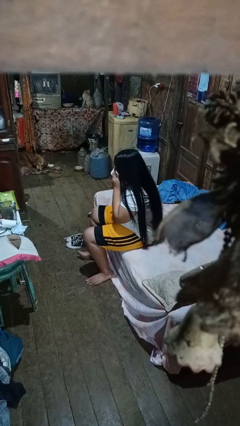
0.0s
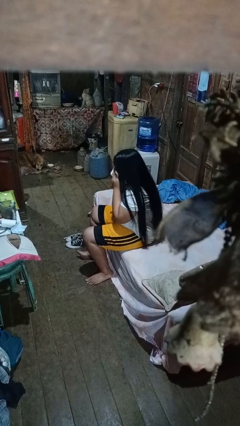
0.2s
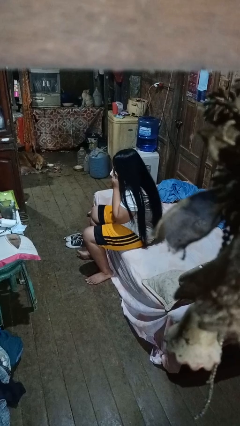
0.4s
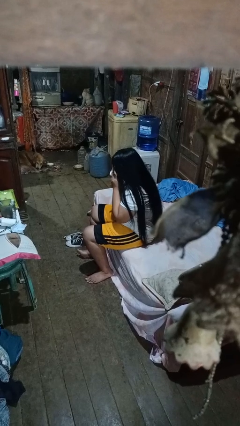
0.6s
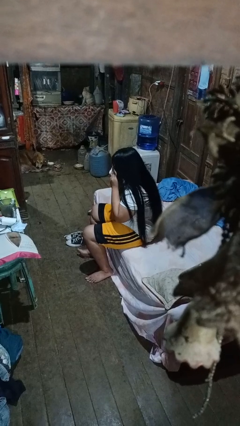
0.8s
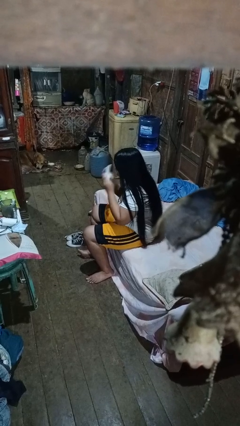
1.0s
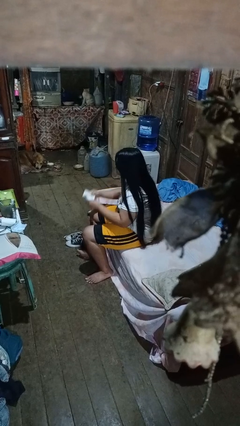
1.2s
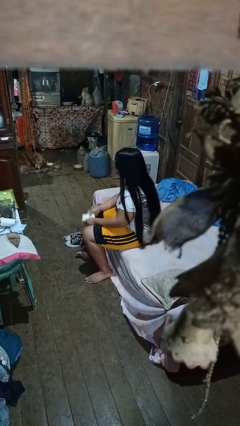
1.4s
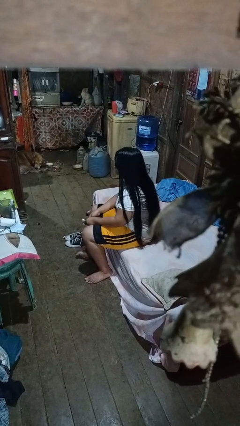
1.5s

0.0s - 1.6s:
person blows nose

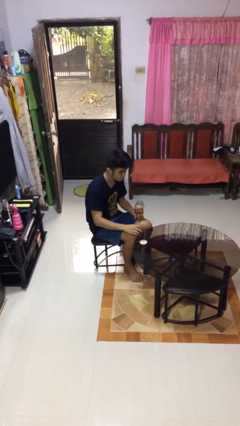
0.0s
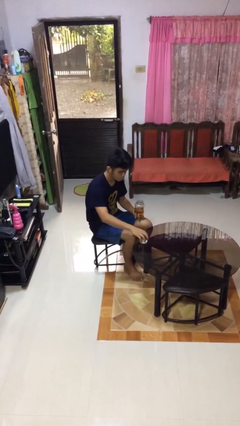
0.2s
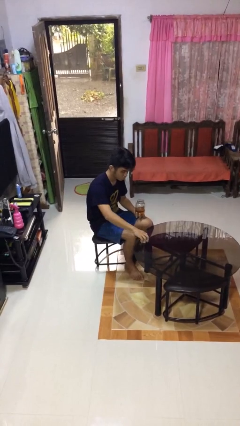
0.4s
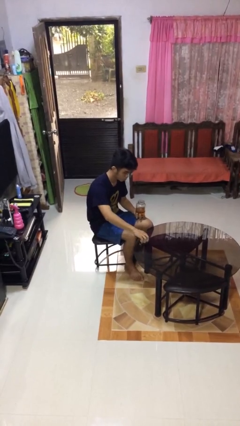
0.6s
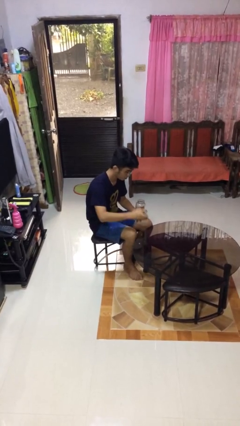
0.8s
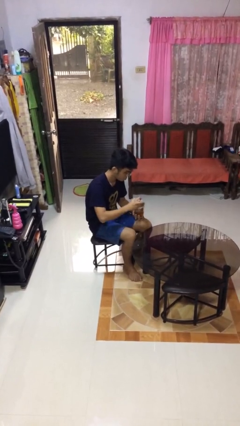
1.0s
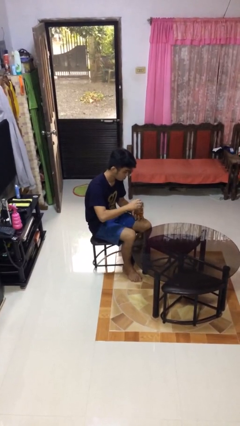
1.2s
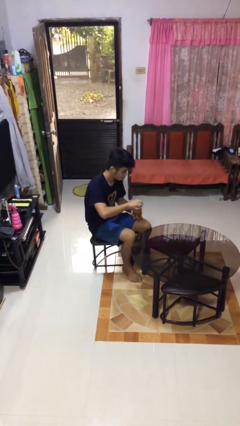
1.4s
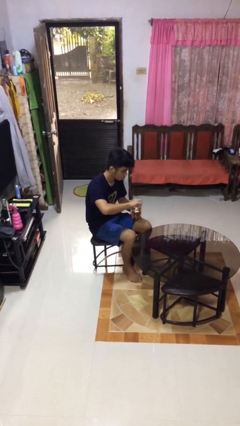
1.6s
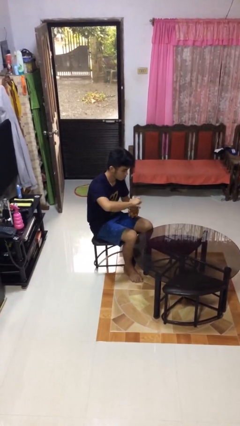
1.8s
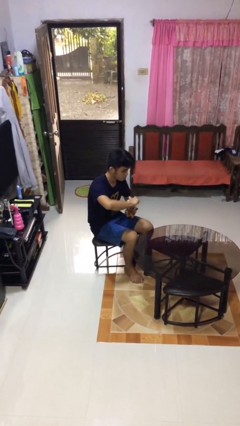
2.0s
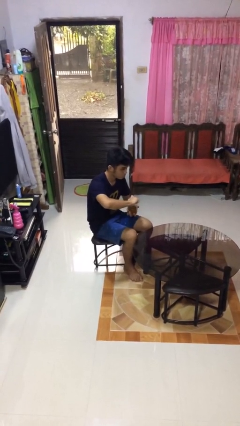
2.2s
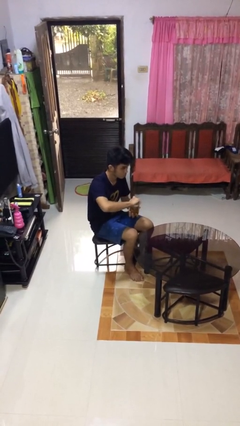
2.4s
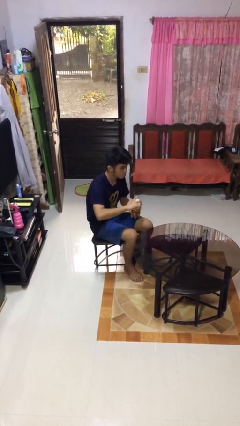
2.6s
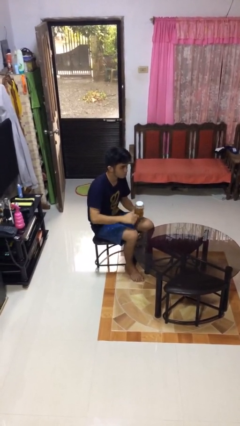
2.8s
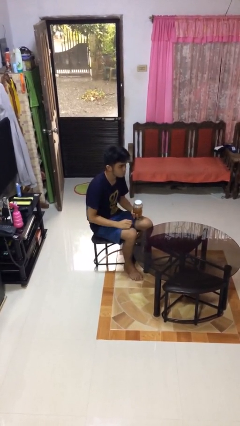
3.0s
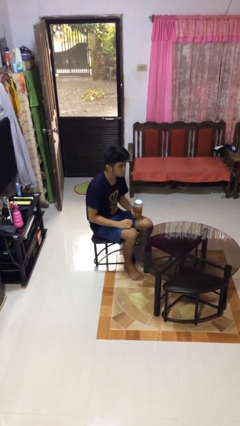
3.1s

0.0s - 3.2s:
person closes jar

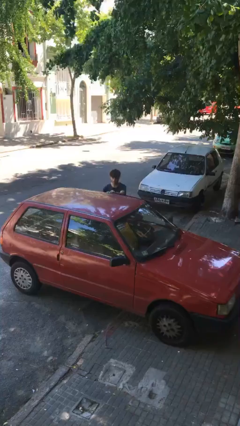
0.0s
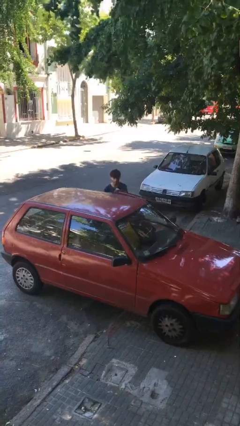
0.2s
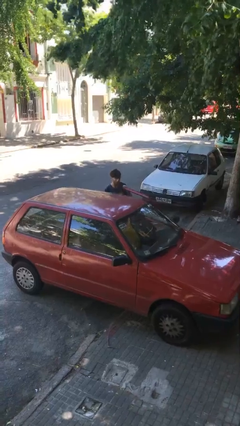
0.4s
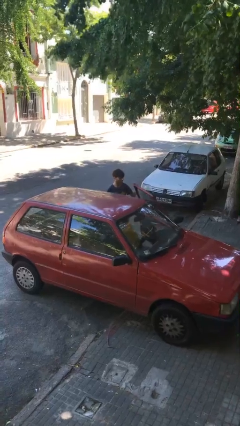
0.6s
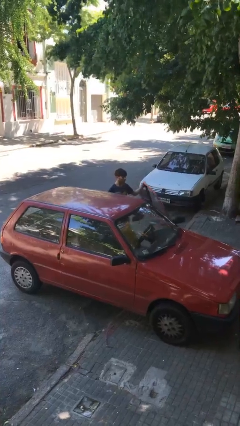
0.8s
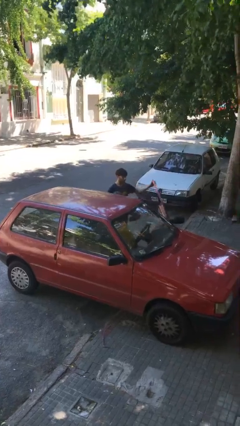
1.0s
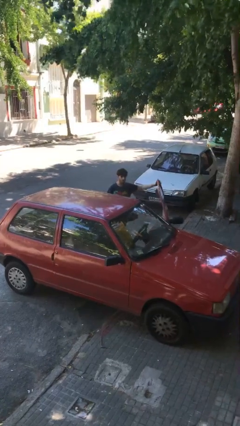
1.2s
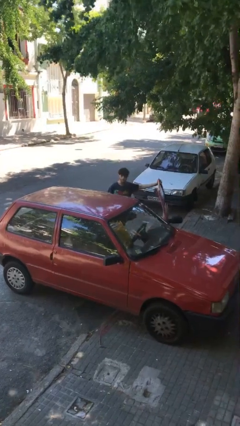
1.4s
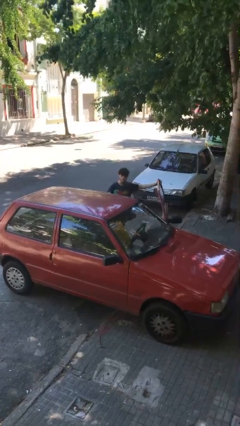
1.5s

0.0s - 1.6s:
person opens car door

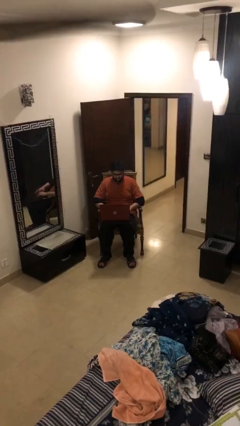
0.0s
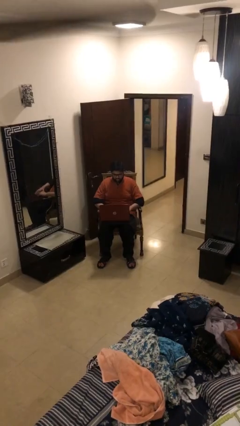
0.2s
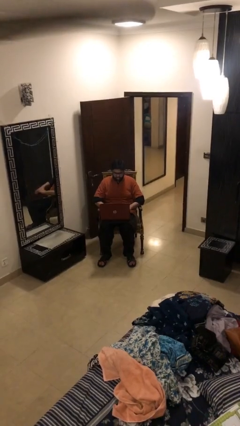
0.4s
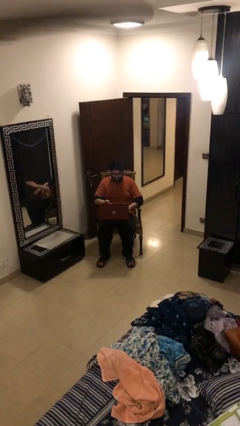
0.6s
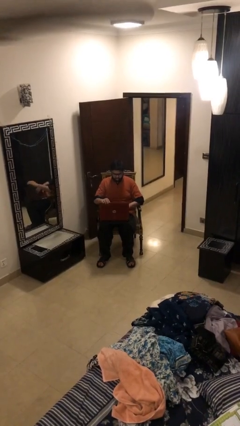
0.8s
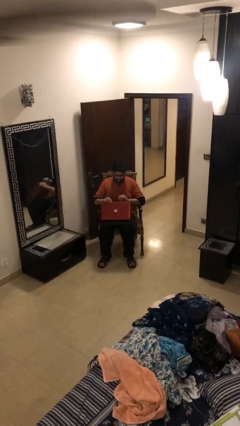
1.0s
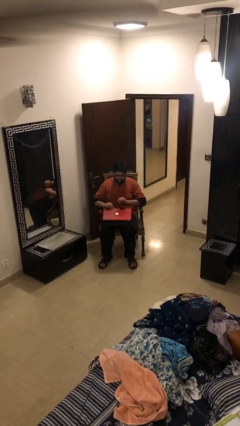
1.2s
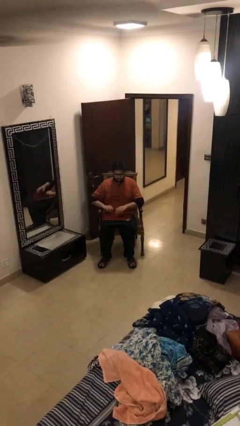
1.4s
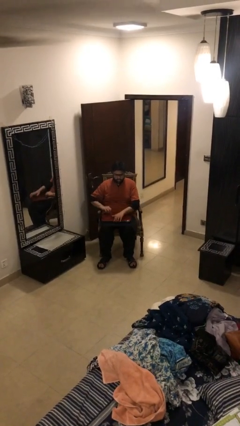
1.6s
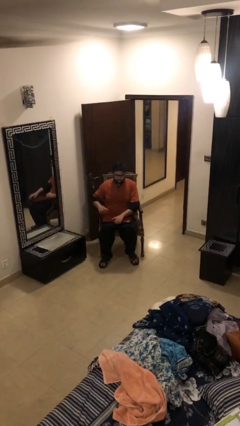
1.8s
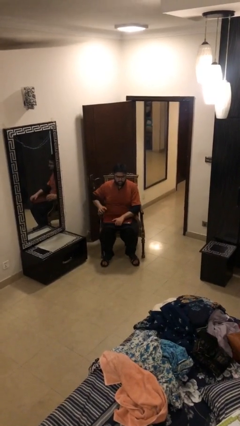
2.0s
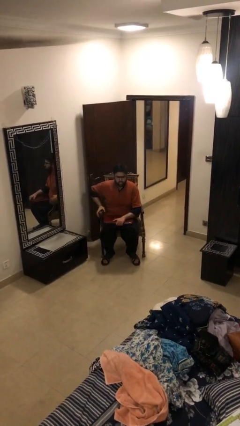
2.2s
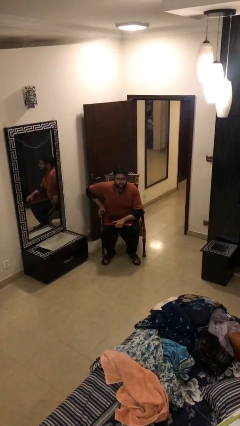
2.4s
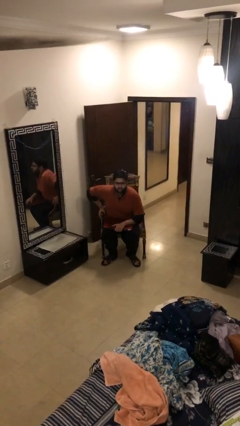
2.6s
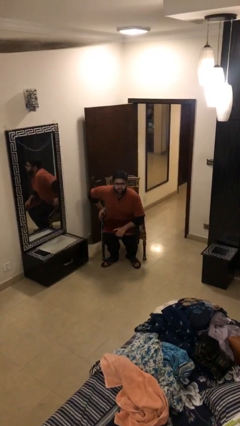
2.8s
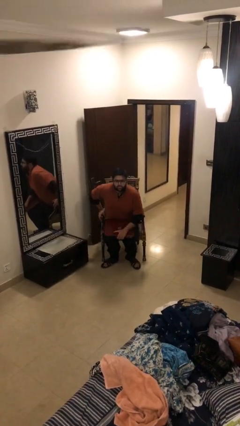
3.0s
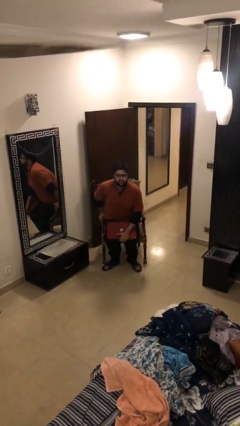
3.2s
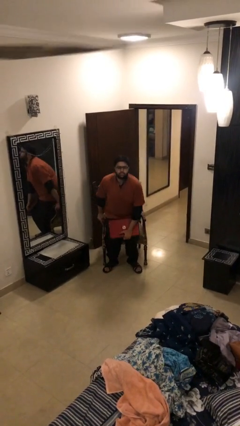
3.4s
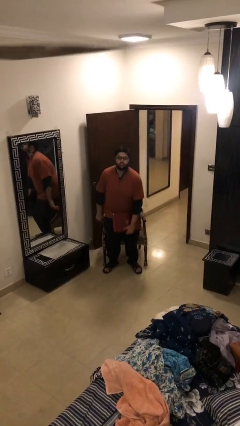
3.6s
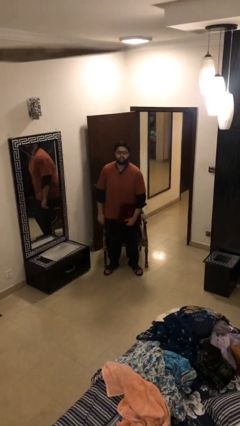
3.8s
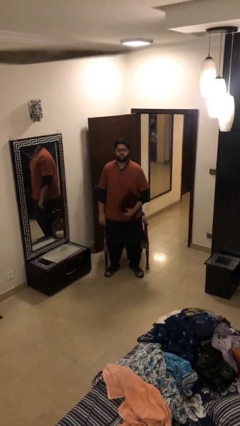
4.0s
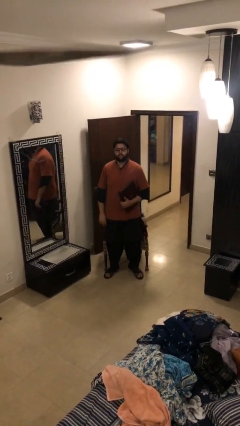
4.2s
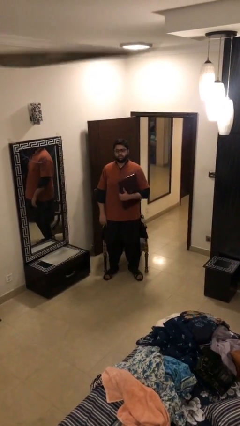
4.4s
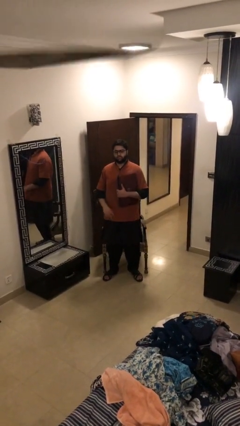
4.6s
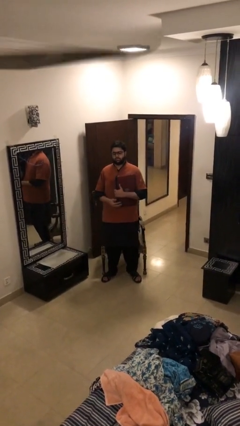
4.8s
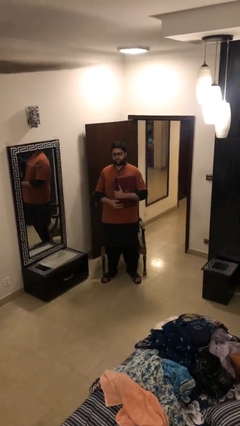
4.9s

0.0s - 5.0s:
person stands up

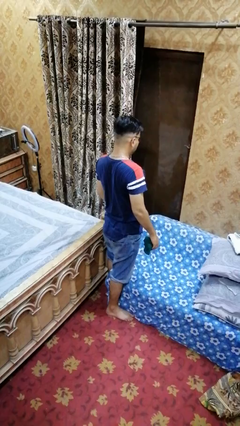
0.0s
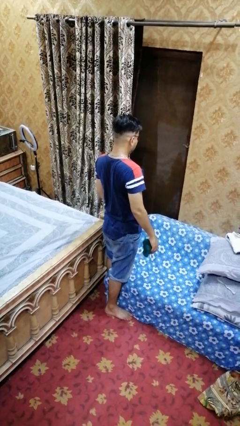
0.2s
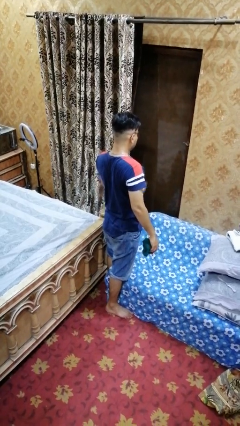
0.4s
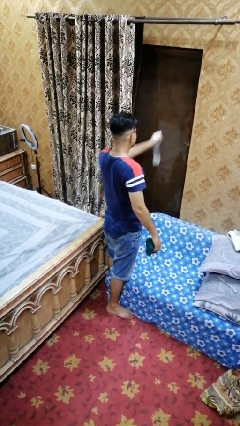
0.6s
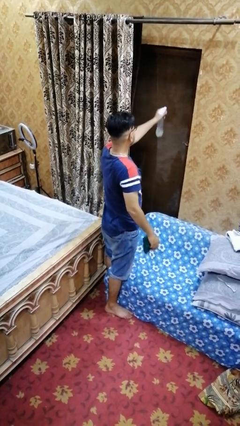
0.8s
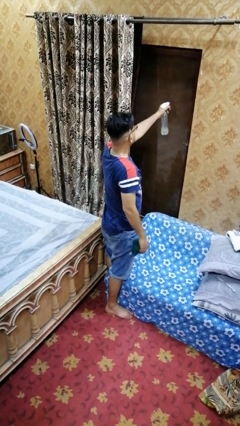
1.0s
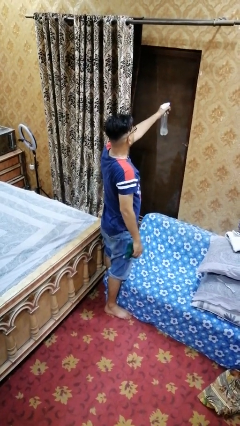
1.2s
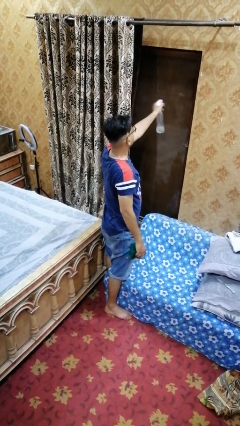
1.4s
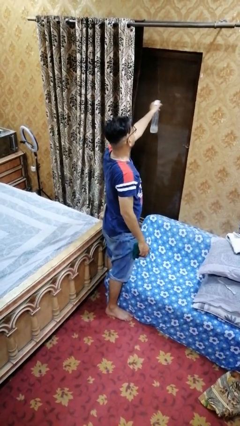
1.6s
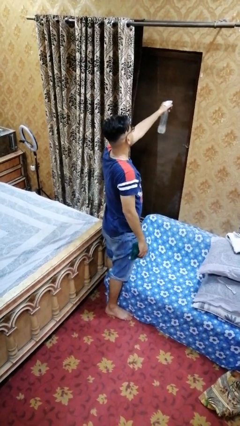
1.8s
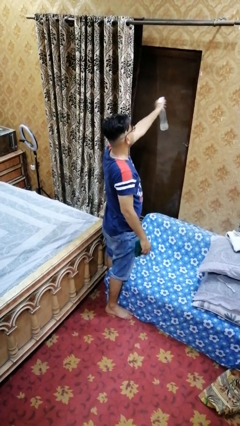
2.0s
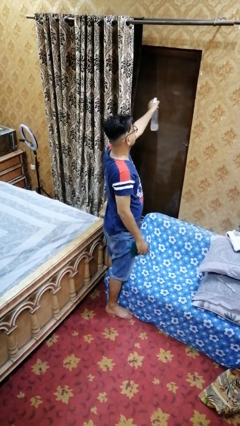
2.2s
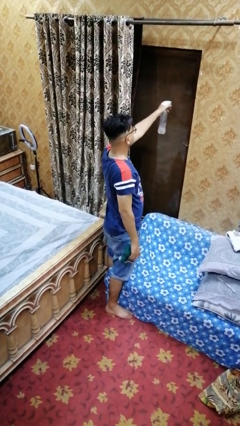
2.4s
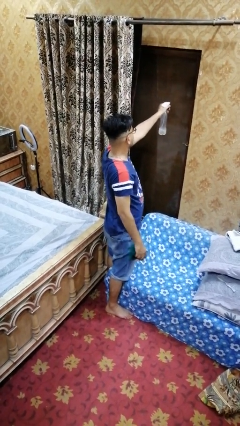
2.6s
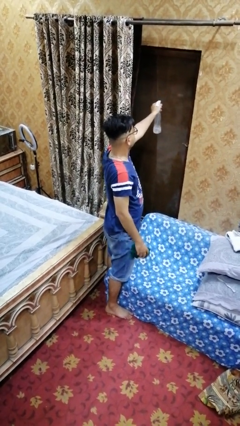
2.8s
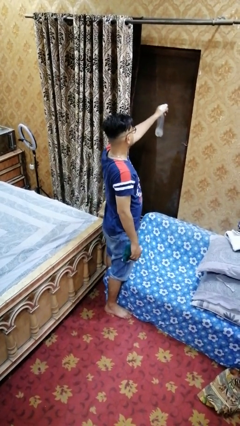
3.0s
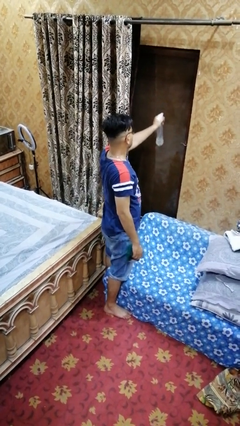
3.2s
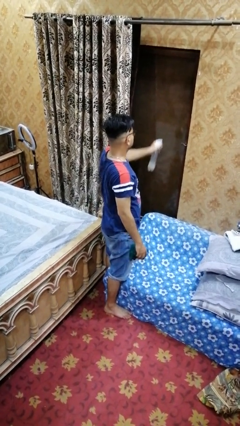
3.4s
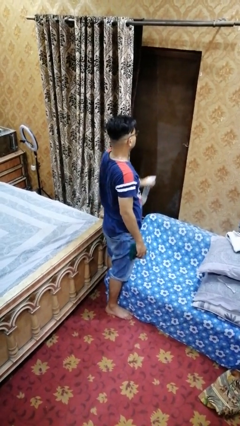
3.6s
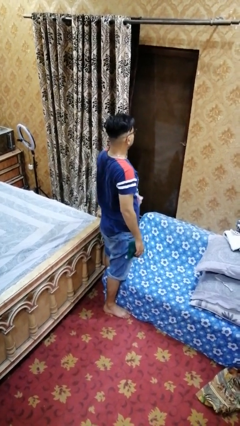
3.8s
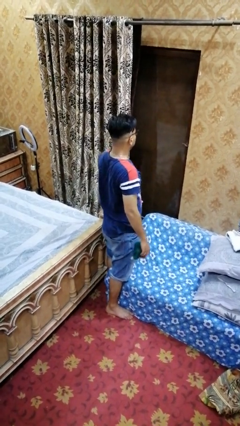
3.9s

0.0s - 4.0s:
person sprays from bottle

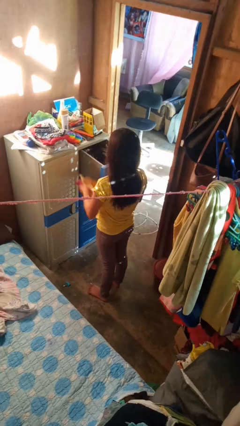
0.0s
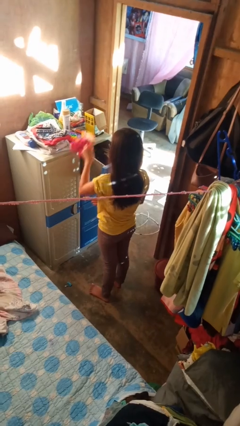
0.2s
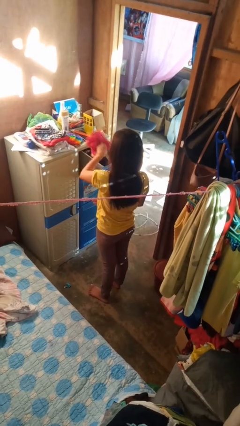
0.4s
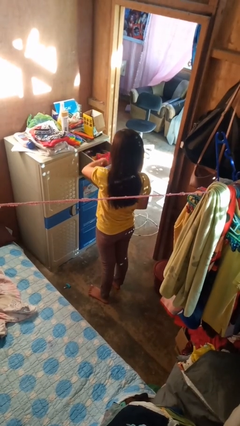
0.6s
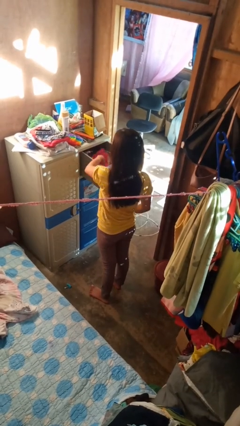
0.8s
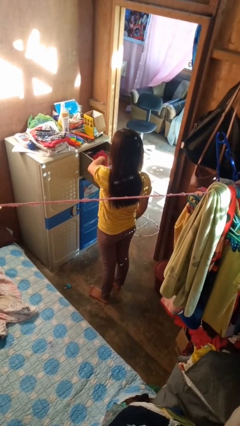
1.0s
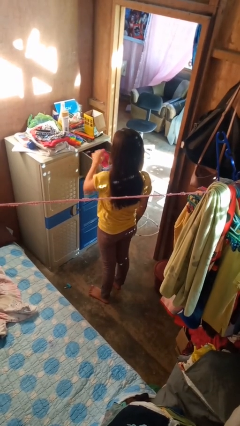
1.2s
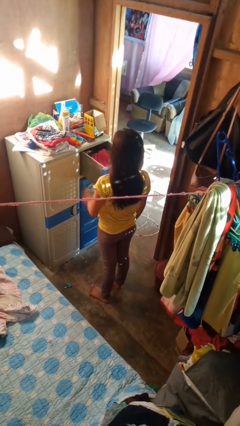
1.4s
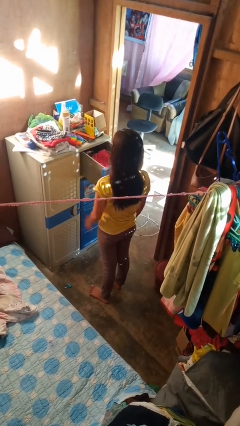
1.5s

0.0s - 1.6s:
person puts clothes into dresser

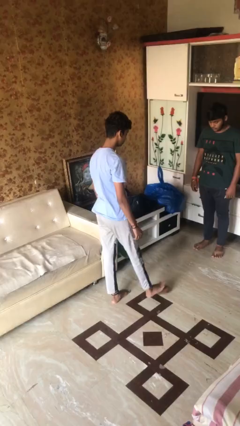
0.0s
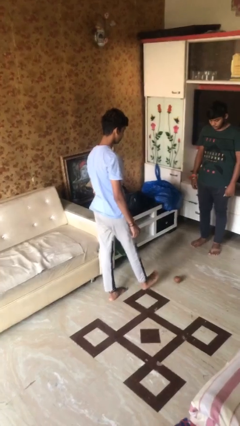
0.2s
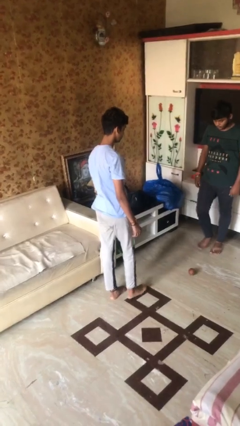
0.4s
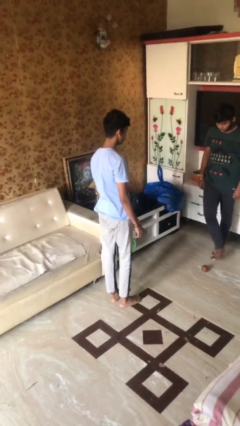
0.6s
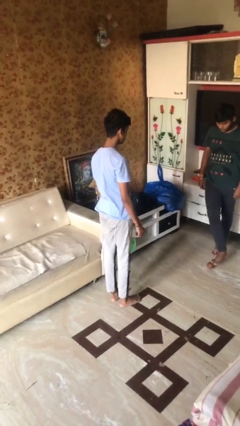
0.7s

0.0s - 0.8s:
person kicks object to person
